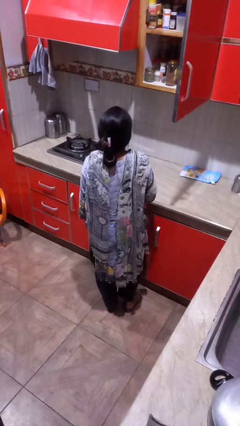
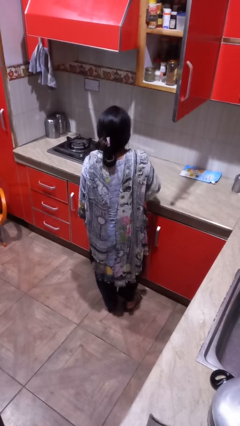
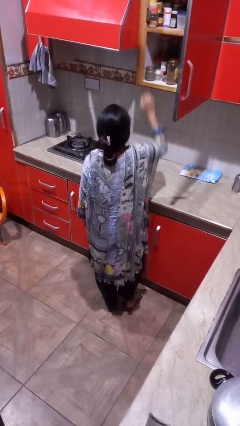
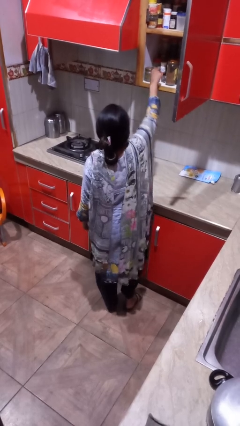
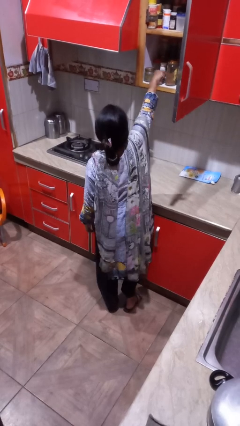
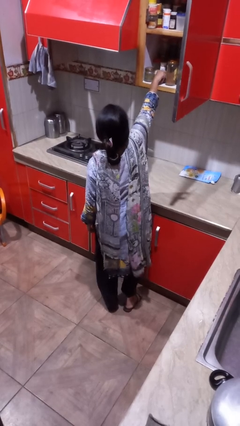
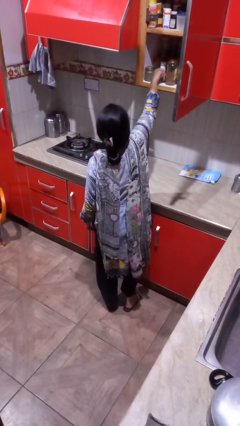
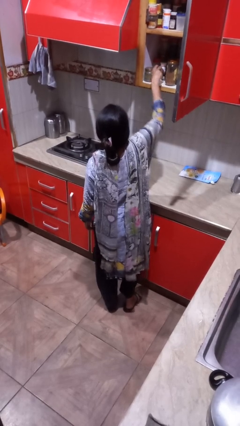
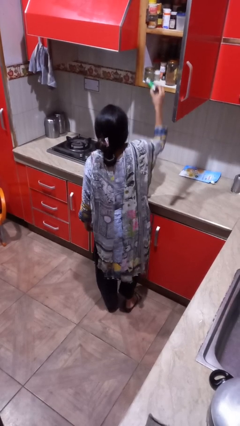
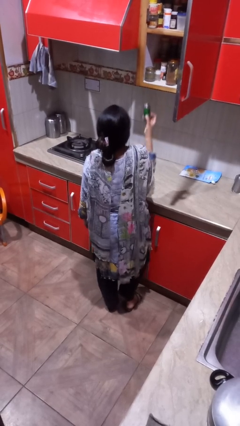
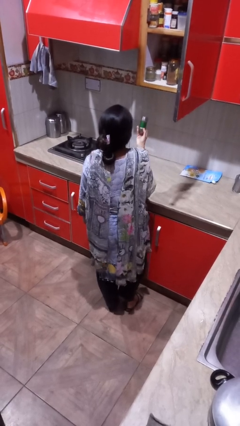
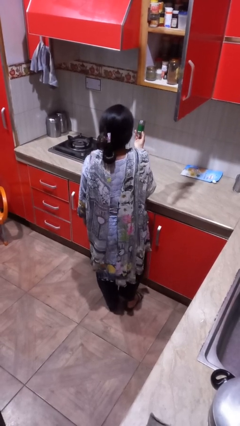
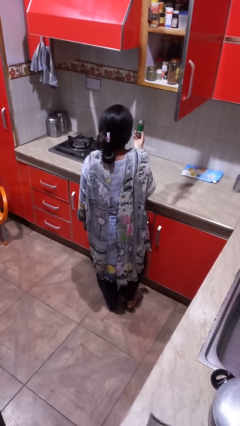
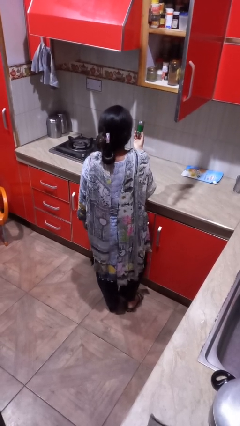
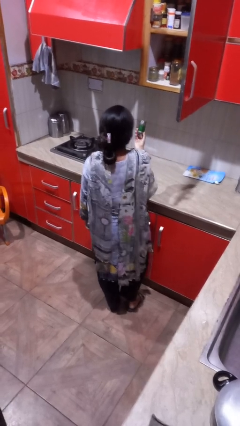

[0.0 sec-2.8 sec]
person takes object from cabinet

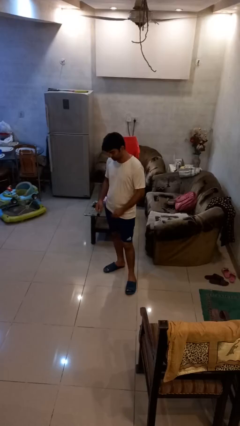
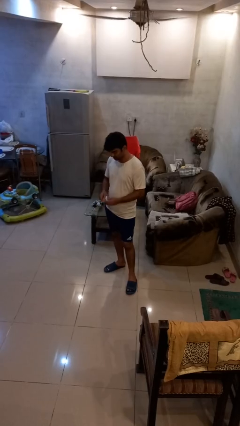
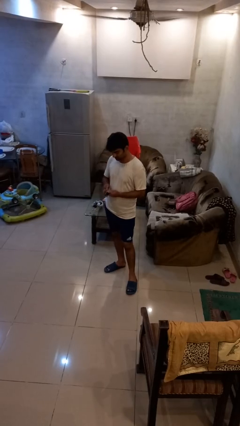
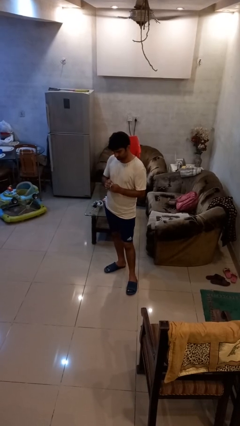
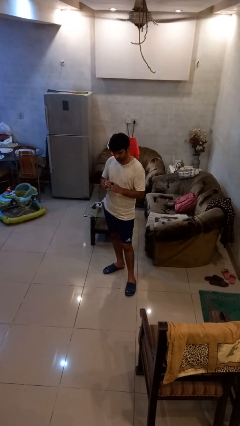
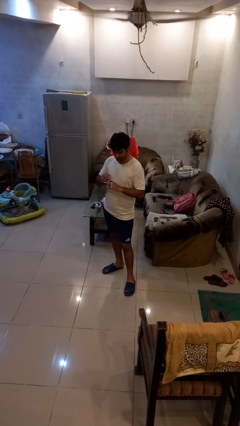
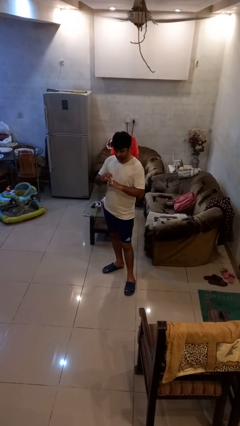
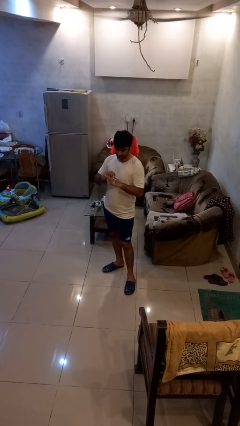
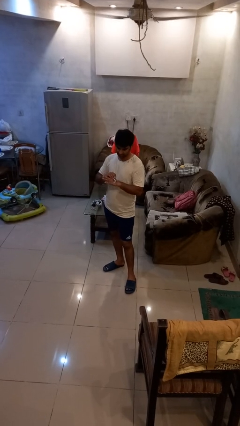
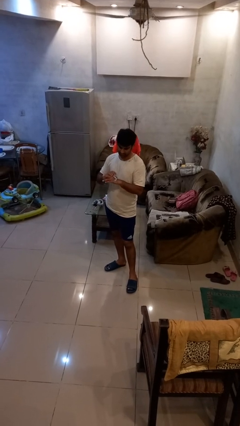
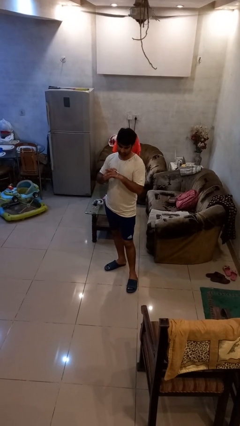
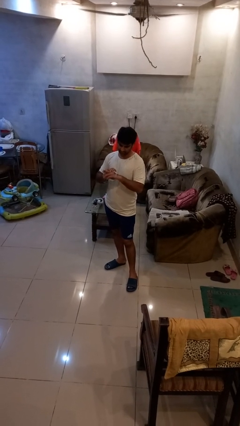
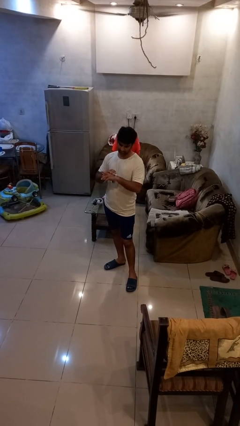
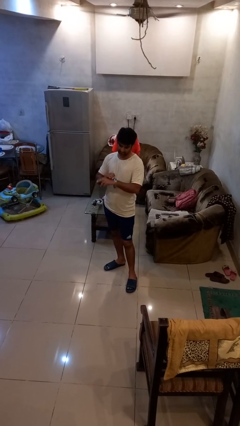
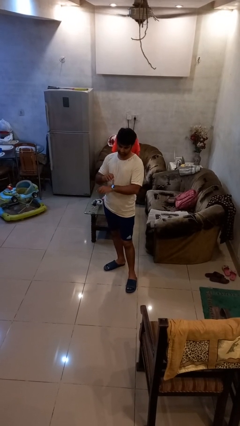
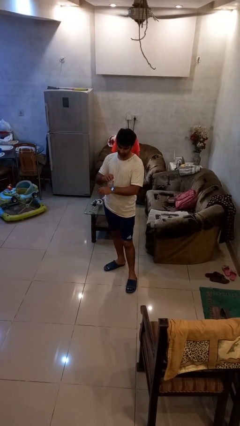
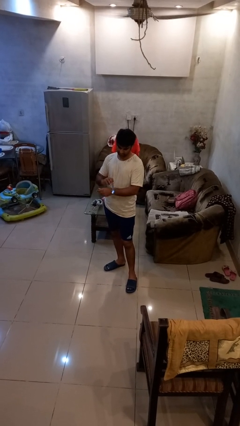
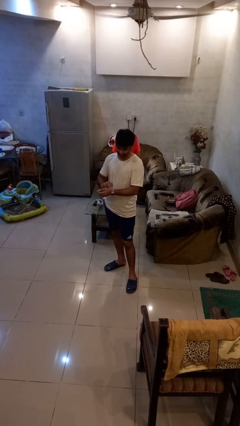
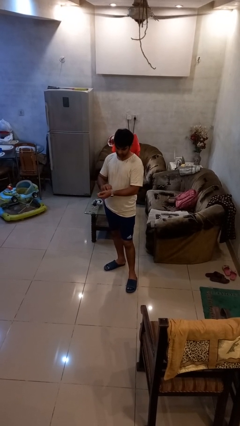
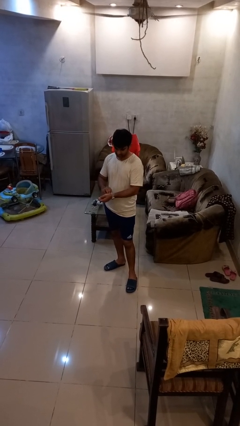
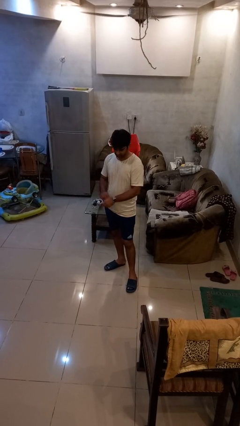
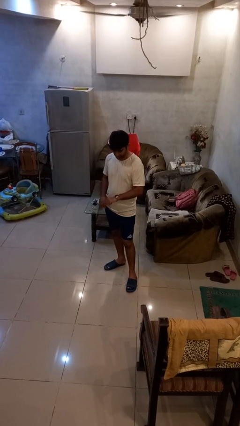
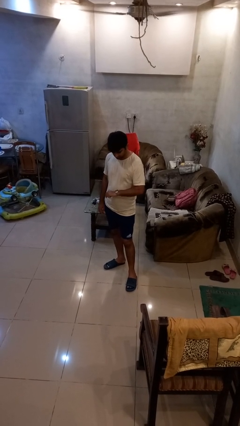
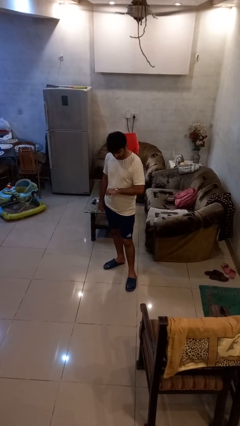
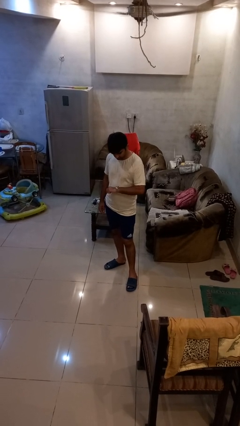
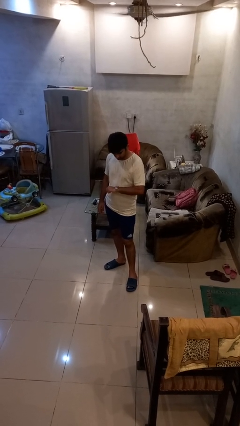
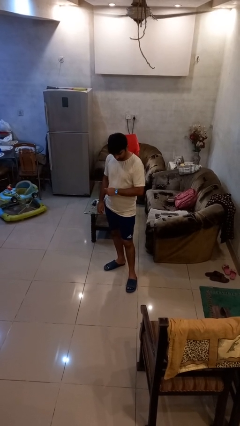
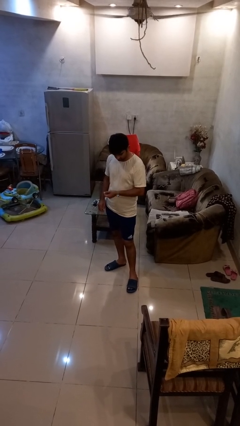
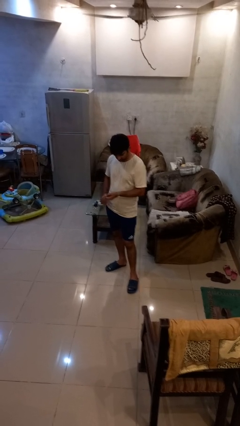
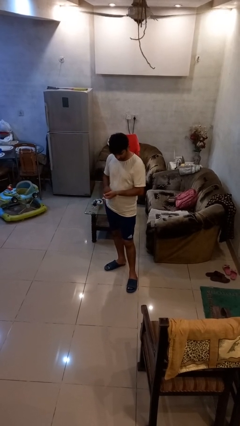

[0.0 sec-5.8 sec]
person puts on wristwatch

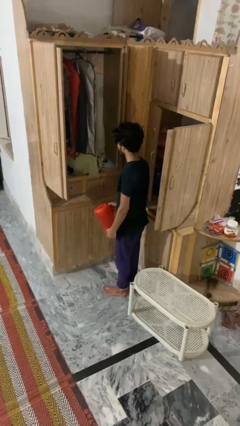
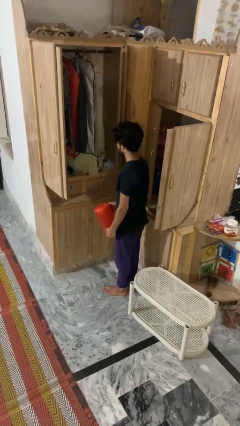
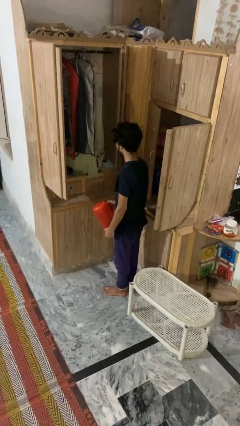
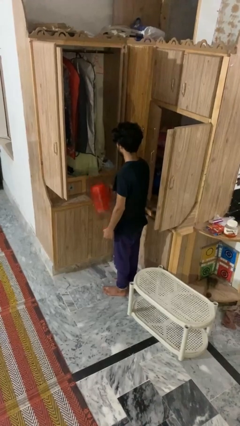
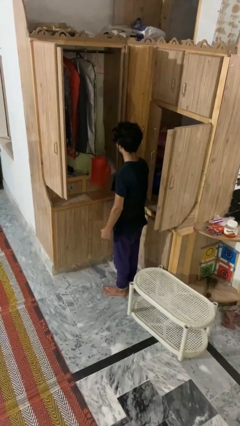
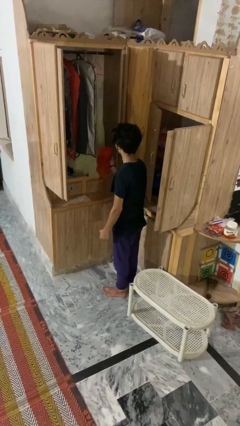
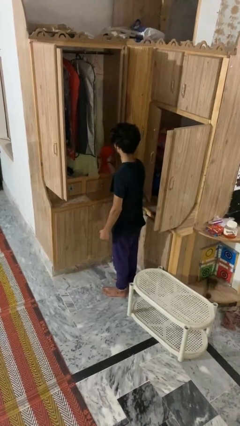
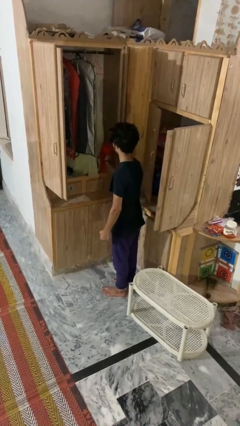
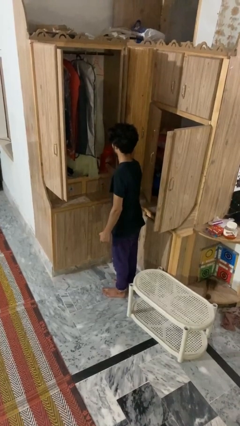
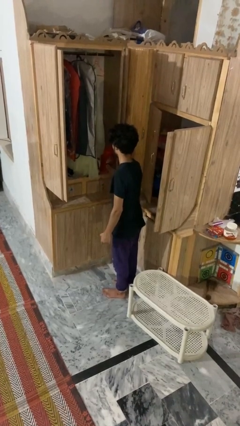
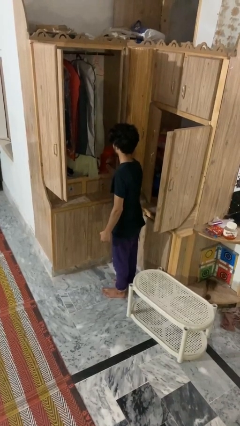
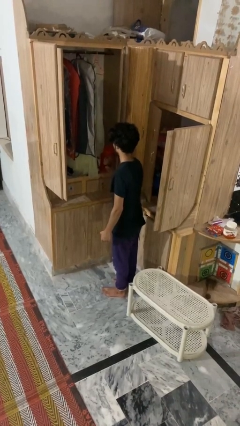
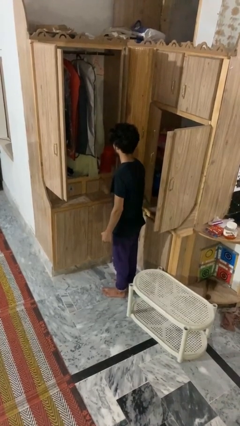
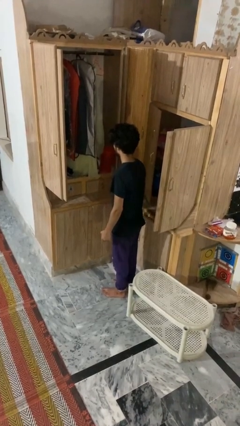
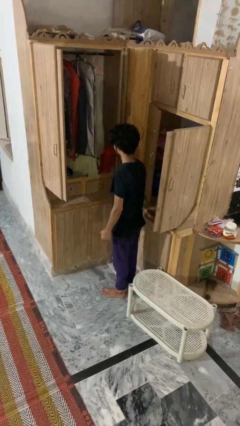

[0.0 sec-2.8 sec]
person puts down object into cabinet

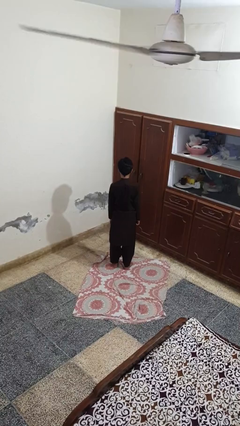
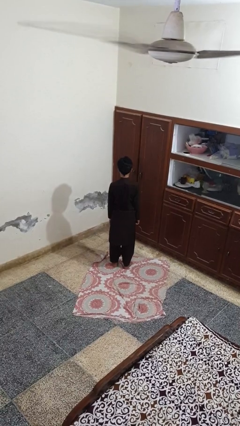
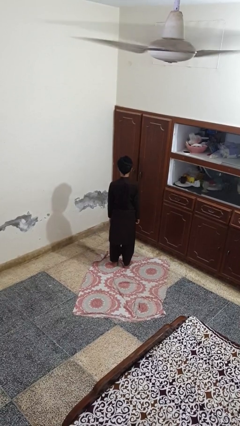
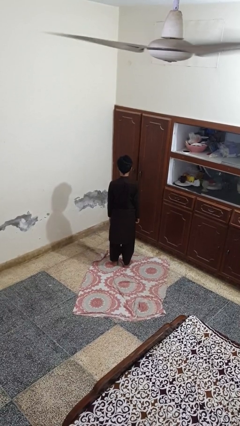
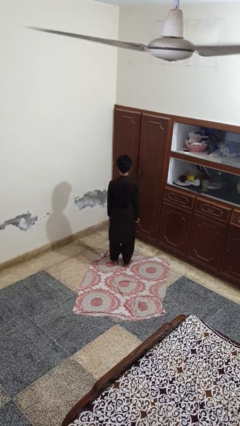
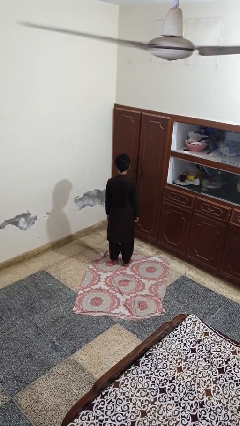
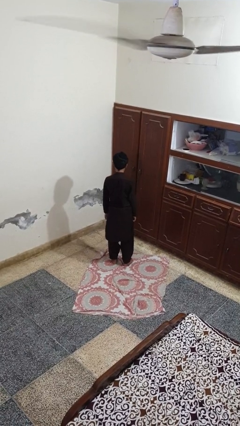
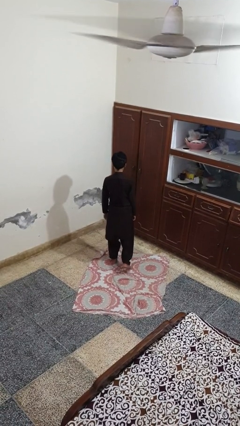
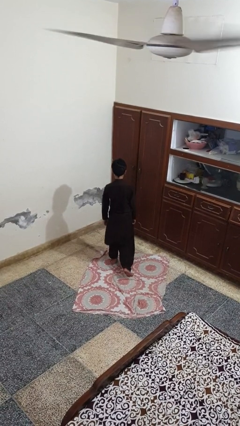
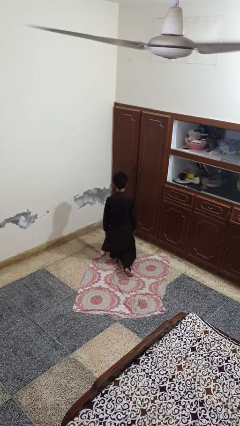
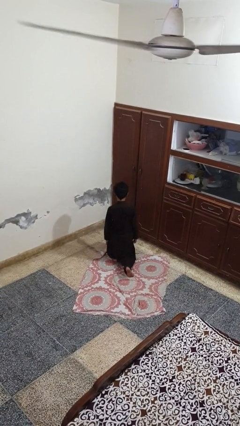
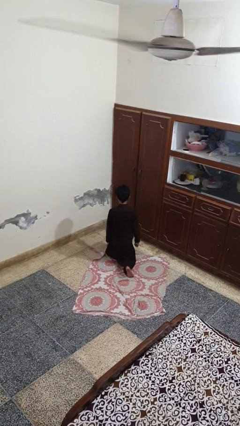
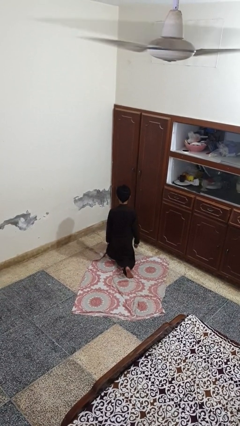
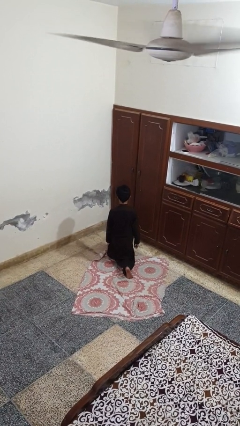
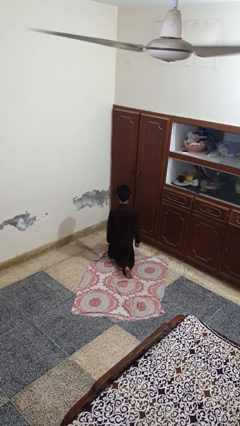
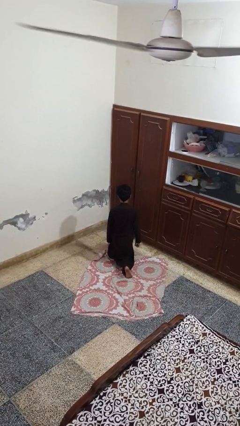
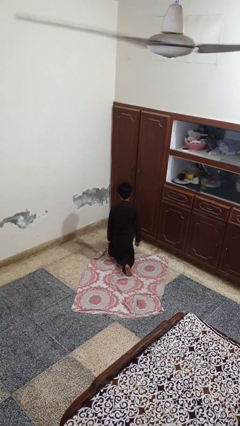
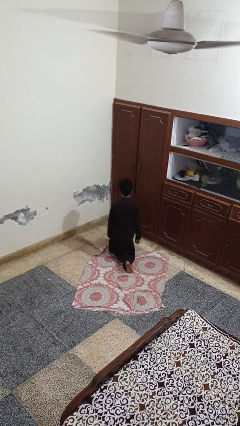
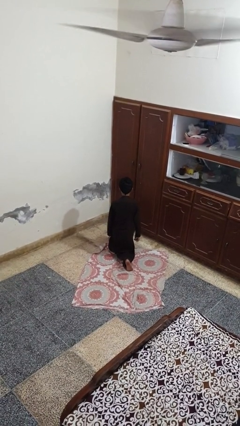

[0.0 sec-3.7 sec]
person kneels

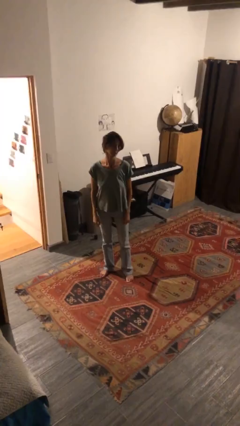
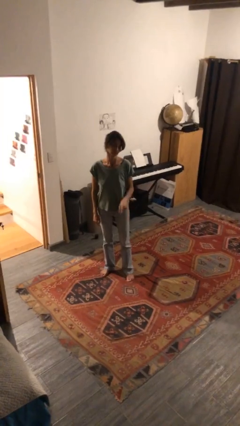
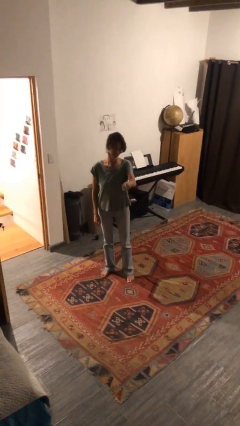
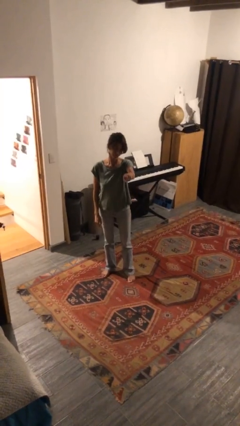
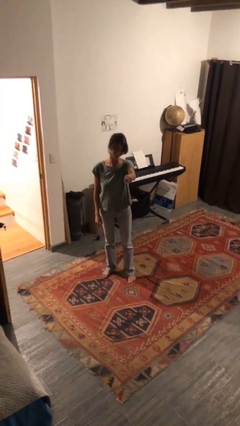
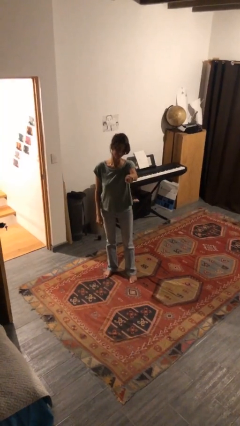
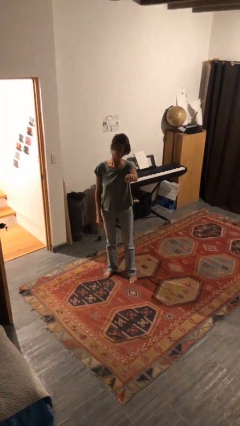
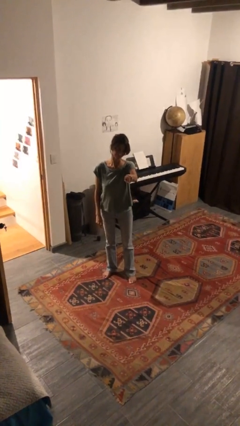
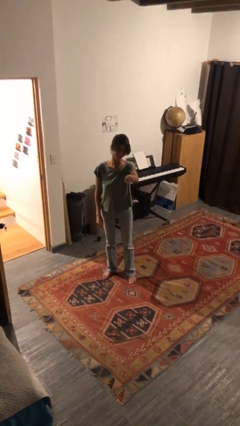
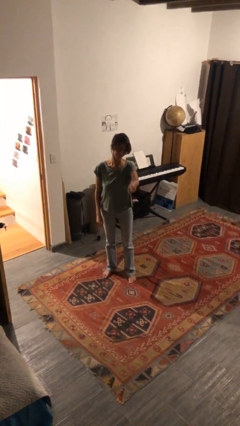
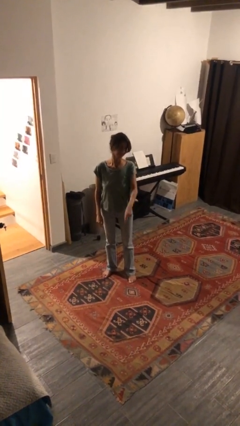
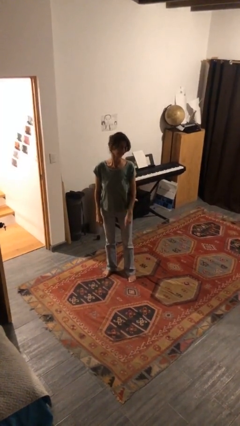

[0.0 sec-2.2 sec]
person points at person
